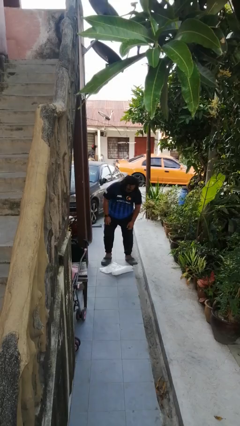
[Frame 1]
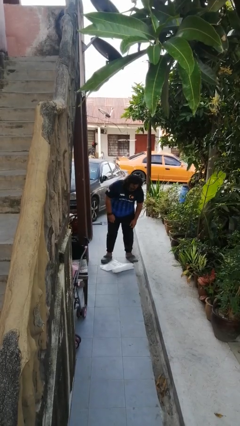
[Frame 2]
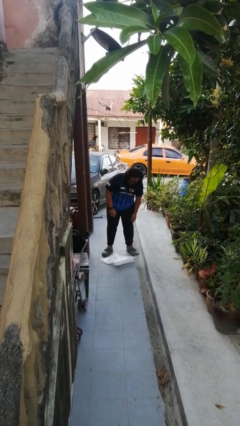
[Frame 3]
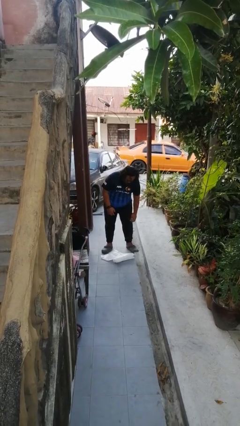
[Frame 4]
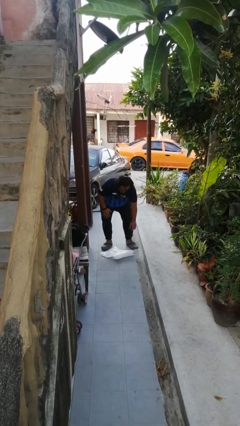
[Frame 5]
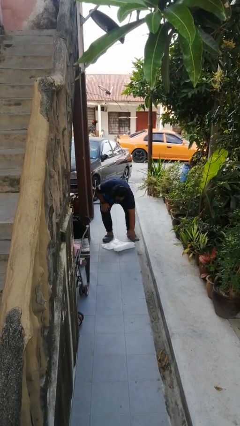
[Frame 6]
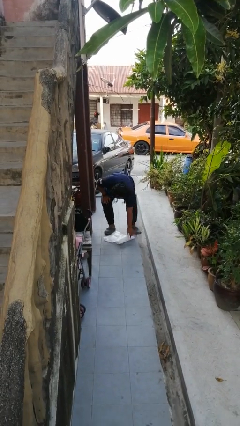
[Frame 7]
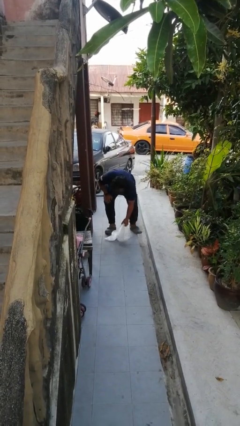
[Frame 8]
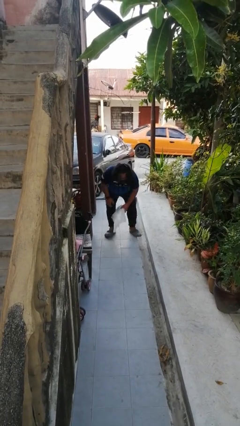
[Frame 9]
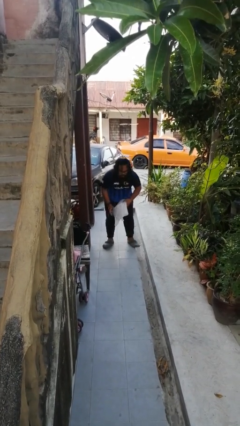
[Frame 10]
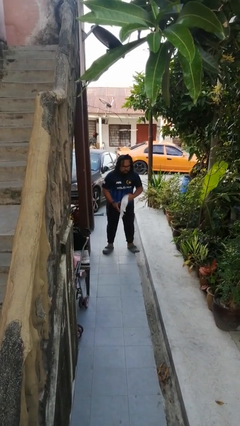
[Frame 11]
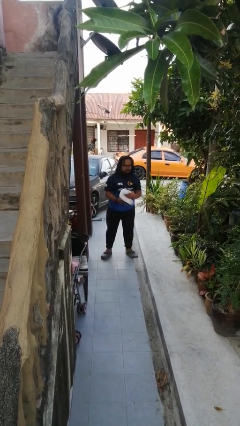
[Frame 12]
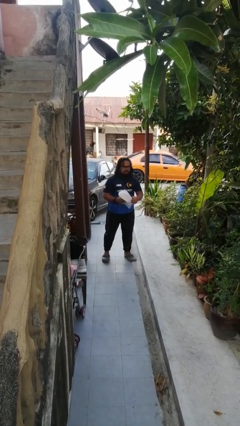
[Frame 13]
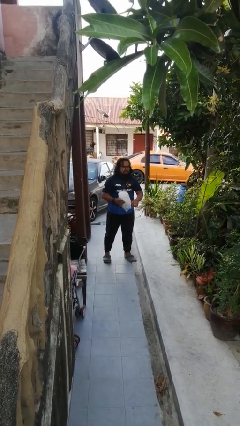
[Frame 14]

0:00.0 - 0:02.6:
person picks up object from floor

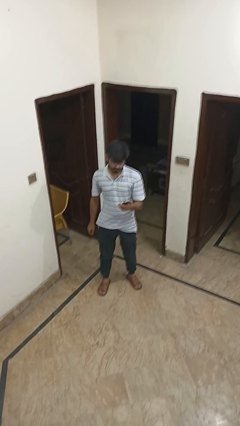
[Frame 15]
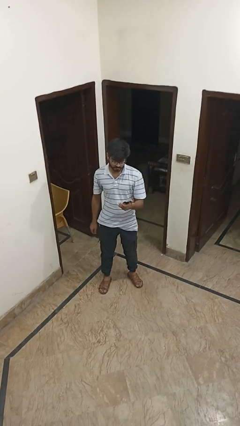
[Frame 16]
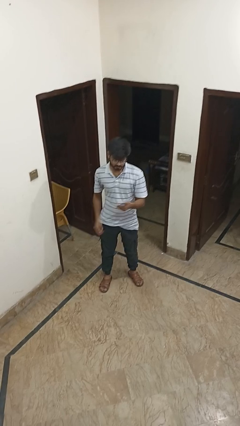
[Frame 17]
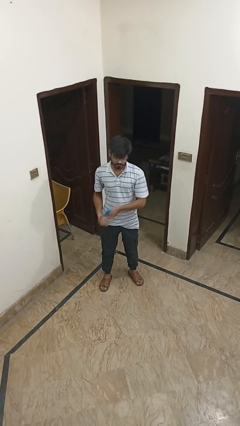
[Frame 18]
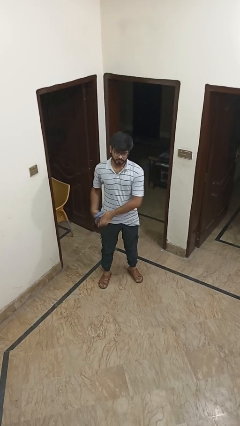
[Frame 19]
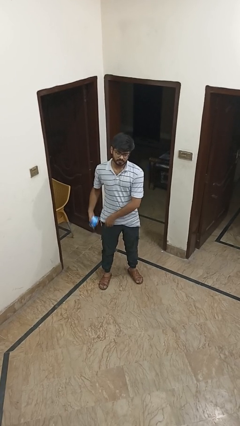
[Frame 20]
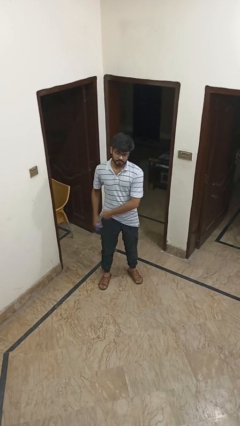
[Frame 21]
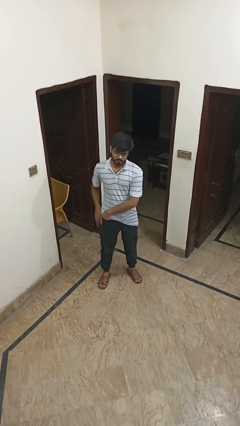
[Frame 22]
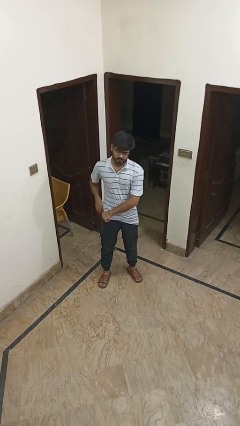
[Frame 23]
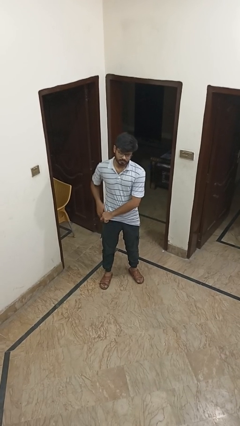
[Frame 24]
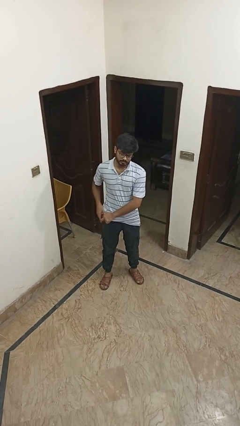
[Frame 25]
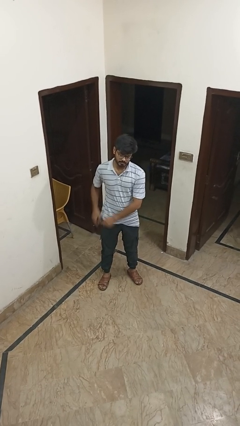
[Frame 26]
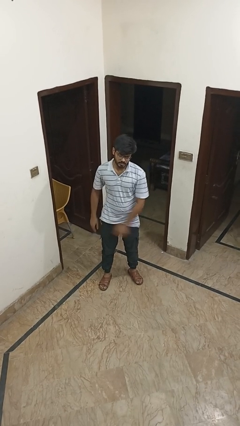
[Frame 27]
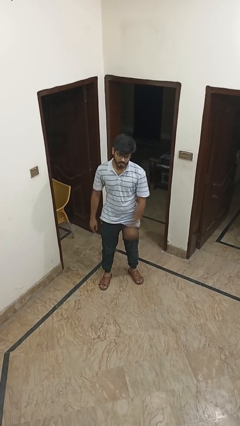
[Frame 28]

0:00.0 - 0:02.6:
person puts phone into pocket

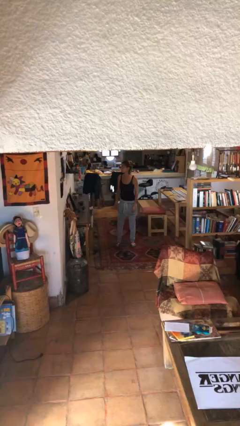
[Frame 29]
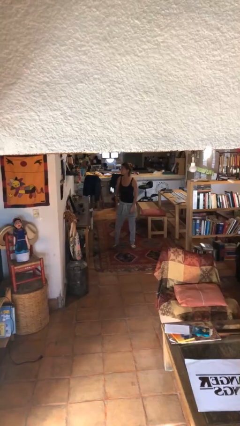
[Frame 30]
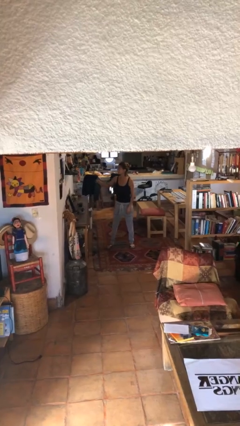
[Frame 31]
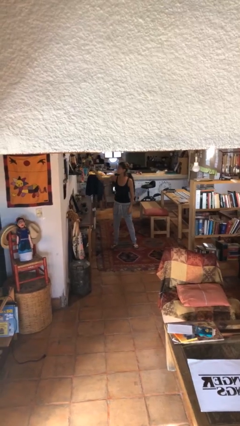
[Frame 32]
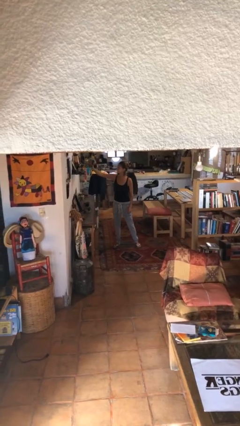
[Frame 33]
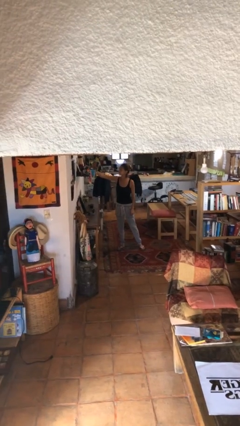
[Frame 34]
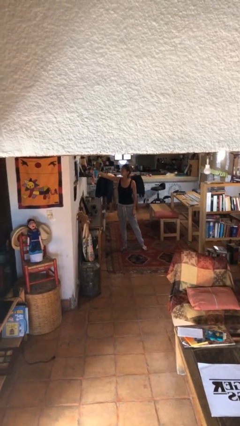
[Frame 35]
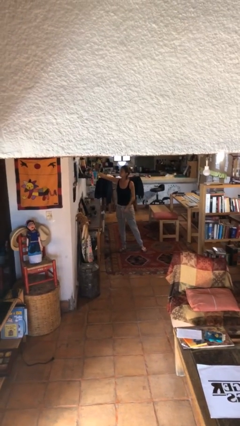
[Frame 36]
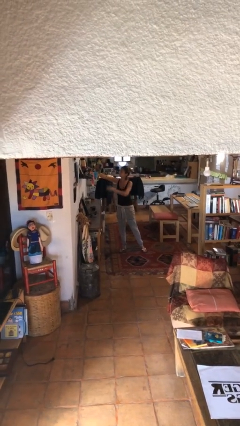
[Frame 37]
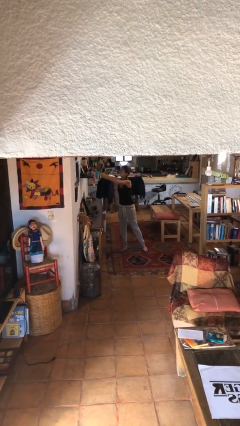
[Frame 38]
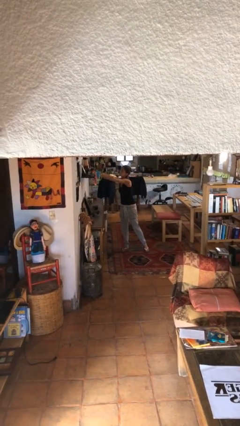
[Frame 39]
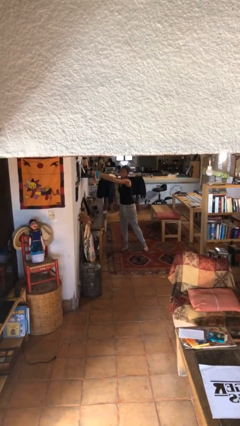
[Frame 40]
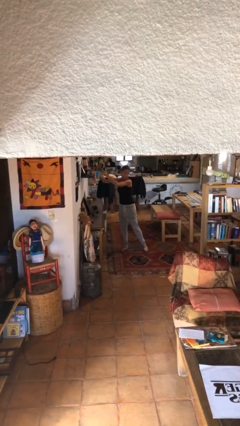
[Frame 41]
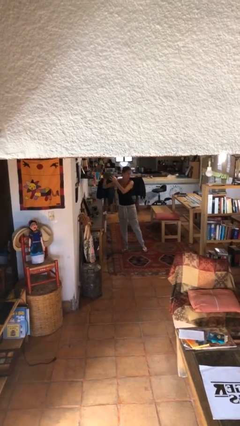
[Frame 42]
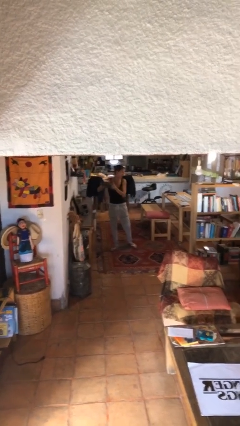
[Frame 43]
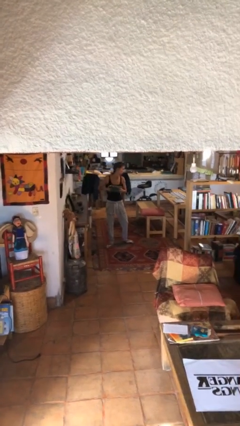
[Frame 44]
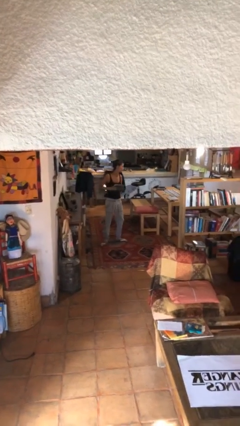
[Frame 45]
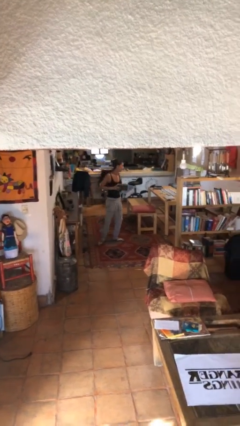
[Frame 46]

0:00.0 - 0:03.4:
person picks up object from shelf

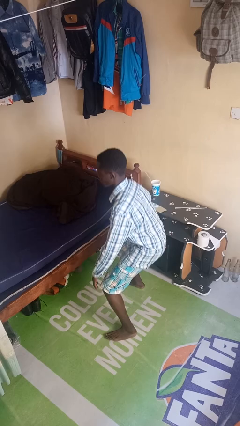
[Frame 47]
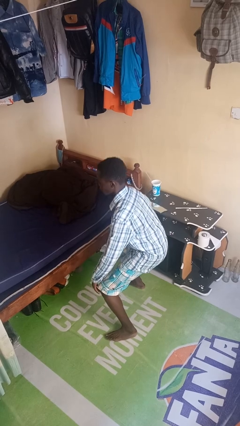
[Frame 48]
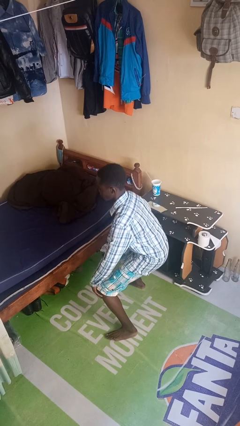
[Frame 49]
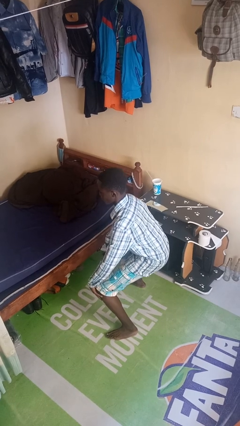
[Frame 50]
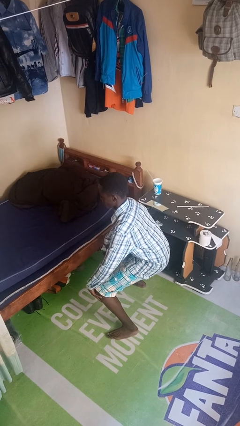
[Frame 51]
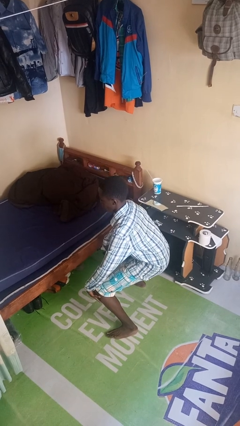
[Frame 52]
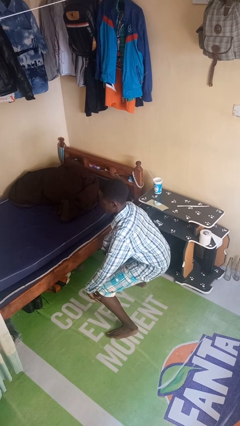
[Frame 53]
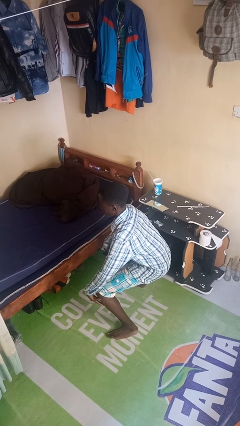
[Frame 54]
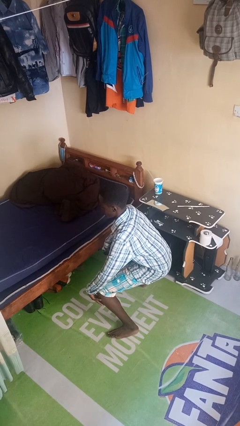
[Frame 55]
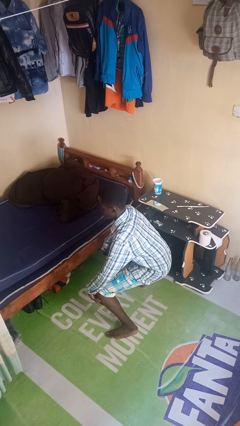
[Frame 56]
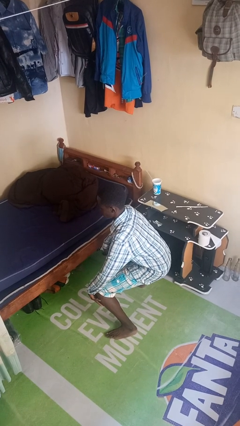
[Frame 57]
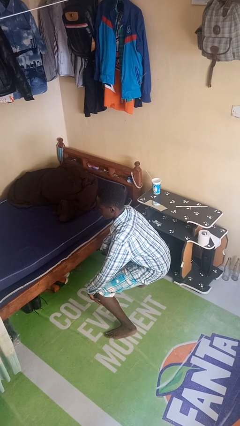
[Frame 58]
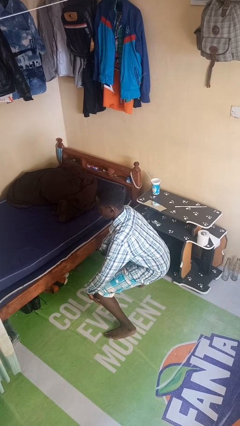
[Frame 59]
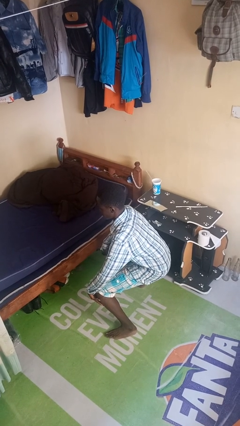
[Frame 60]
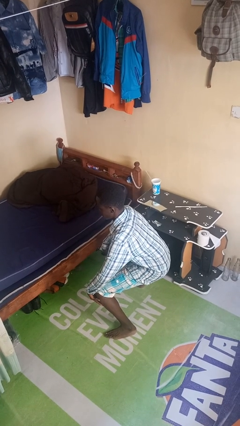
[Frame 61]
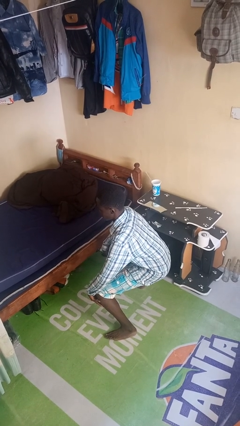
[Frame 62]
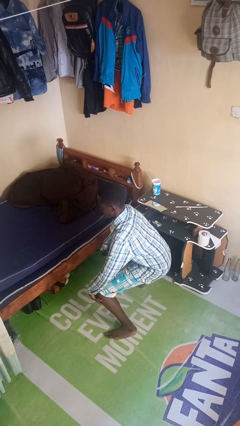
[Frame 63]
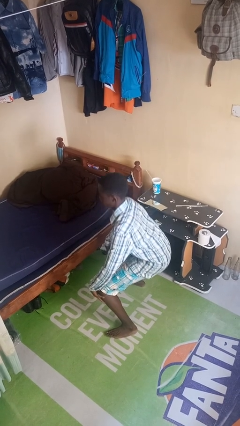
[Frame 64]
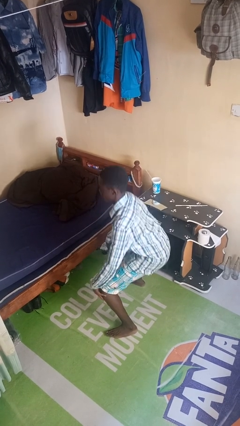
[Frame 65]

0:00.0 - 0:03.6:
person squats

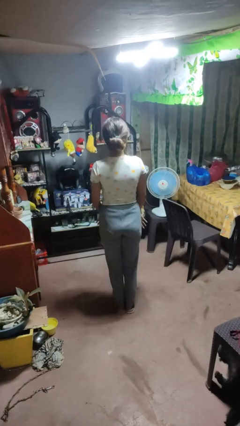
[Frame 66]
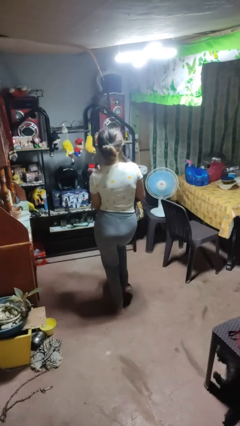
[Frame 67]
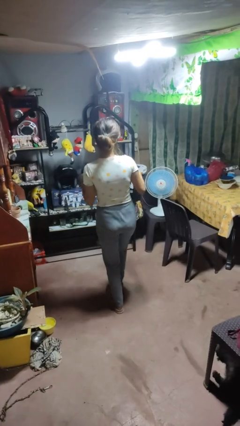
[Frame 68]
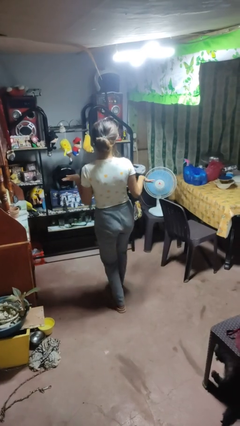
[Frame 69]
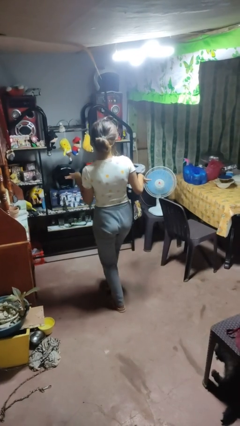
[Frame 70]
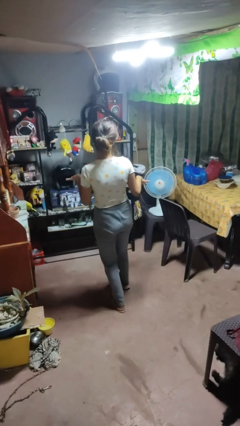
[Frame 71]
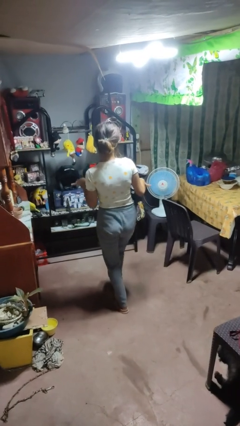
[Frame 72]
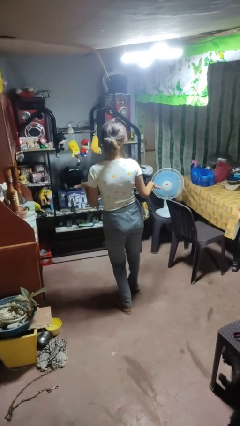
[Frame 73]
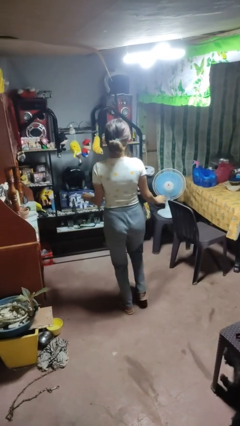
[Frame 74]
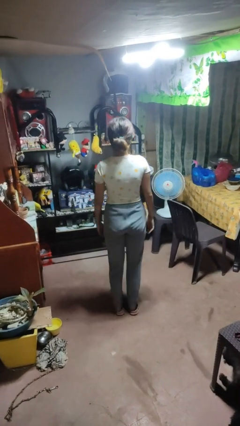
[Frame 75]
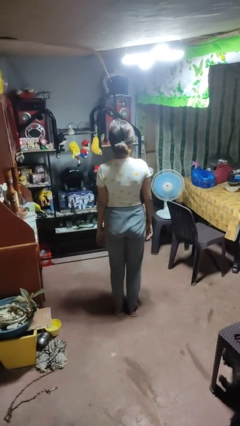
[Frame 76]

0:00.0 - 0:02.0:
person dances in place

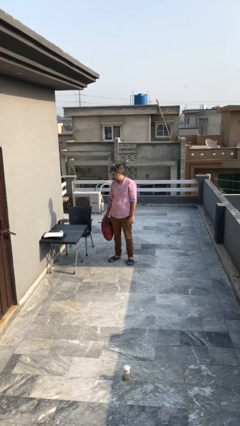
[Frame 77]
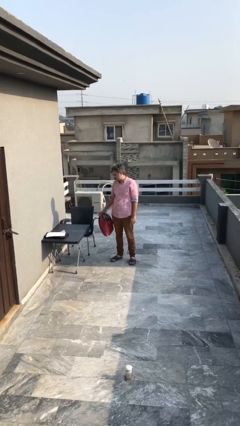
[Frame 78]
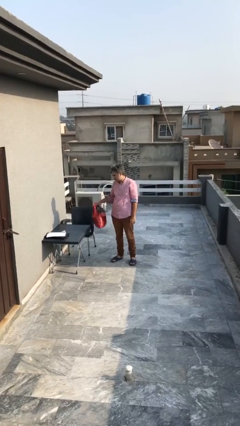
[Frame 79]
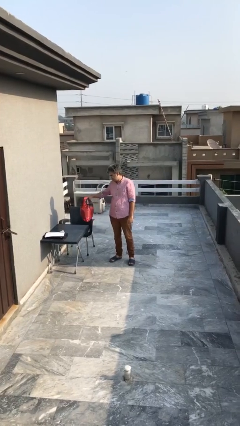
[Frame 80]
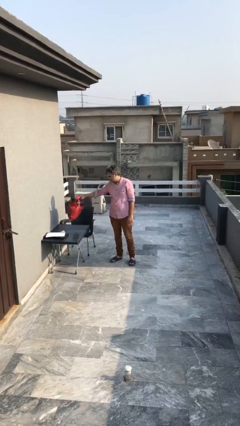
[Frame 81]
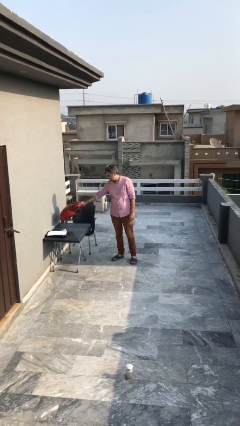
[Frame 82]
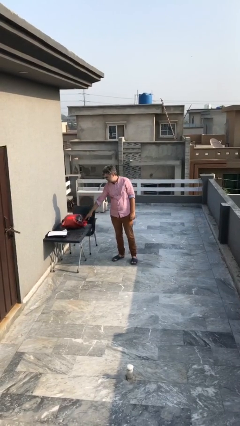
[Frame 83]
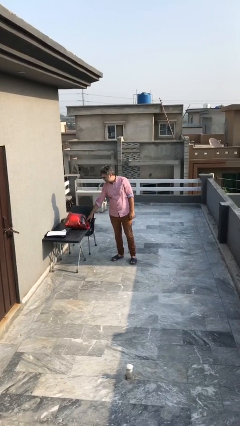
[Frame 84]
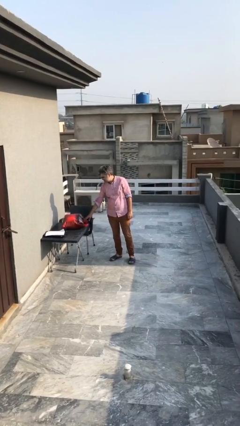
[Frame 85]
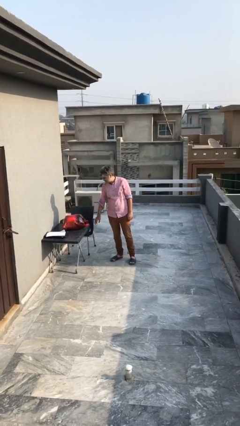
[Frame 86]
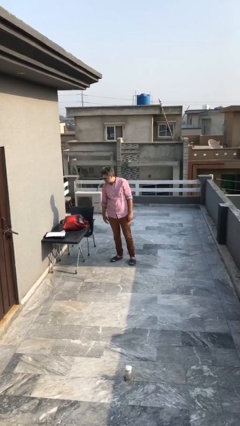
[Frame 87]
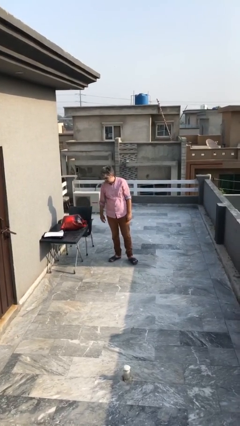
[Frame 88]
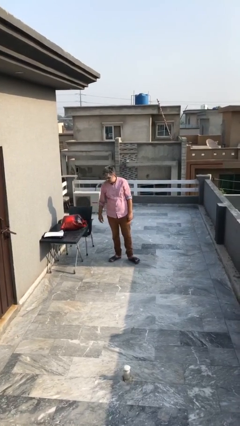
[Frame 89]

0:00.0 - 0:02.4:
person puts down object on table

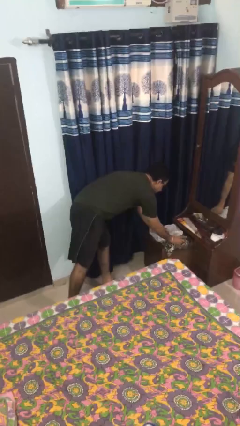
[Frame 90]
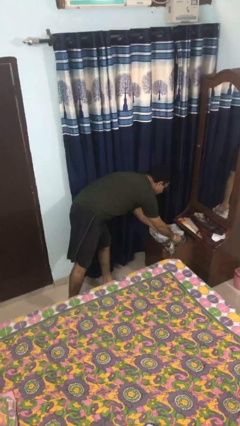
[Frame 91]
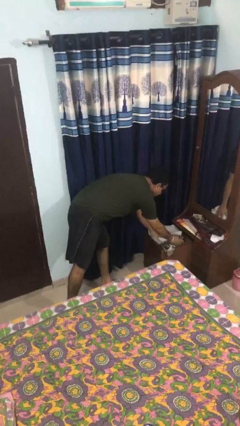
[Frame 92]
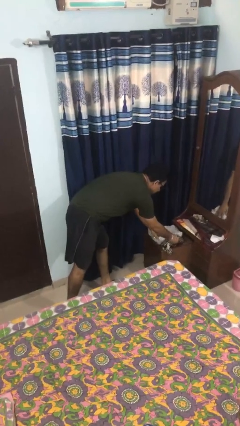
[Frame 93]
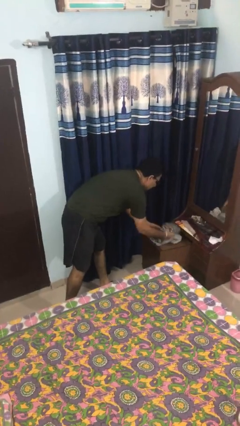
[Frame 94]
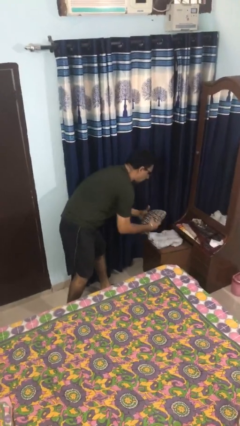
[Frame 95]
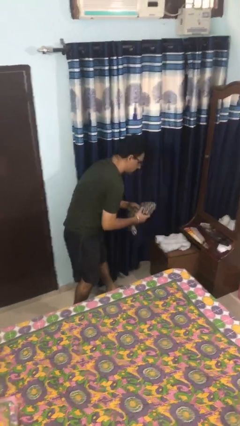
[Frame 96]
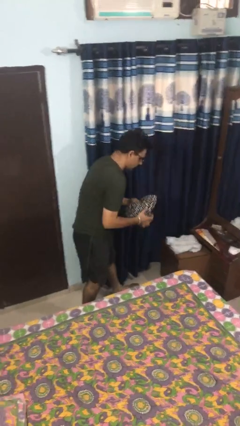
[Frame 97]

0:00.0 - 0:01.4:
person takes clothes from dresser
